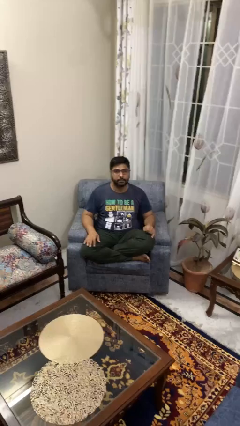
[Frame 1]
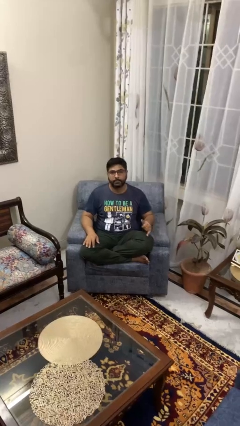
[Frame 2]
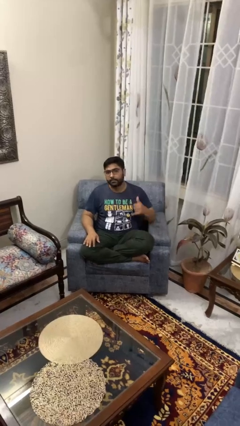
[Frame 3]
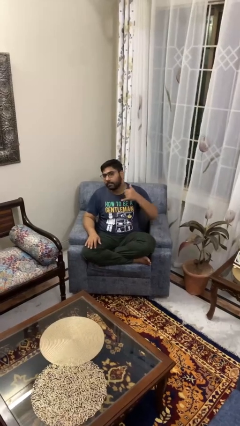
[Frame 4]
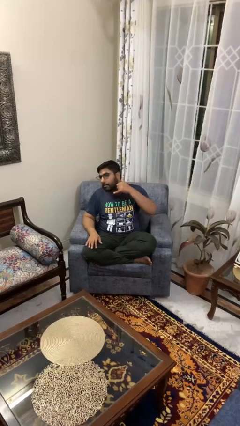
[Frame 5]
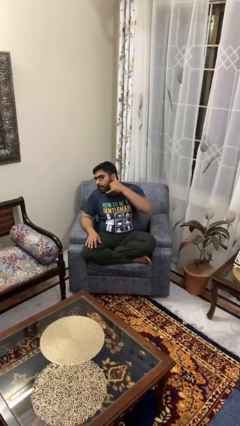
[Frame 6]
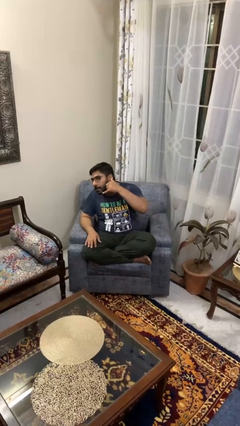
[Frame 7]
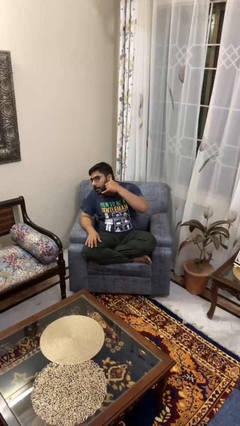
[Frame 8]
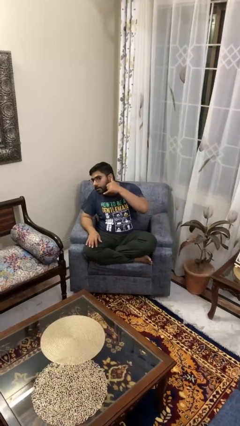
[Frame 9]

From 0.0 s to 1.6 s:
person gestures call me

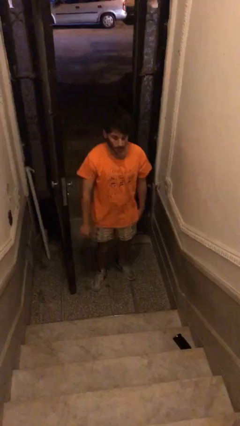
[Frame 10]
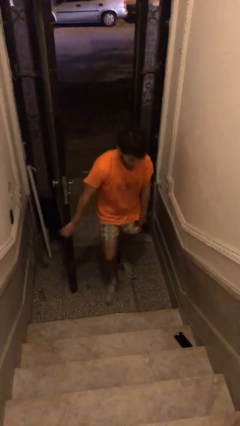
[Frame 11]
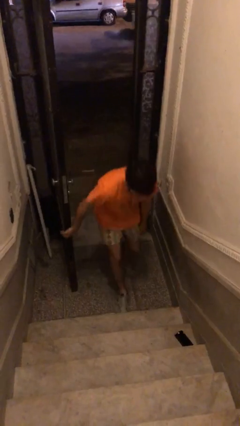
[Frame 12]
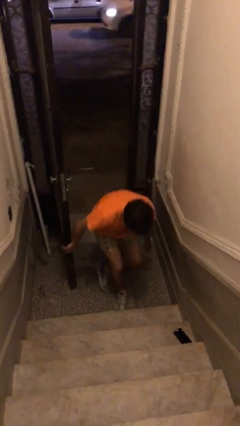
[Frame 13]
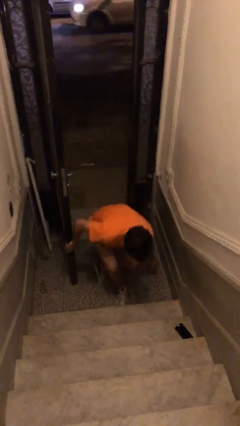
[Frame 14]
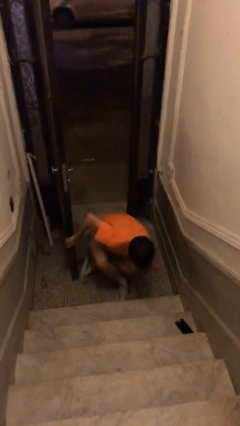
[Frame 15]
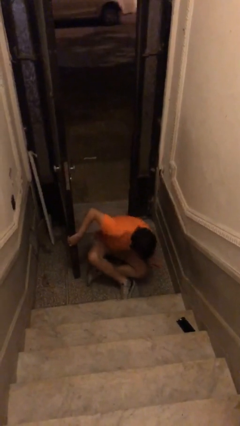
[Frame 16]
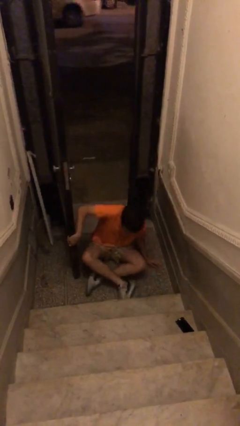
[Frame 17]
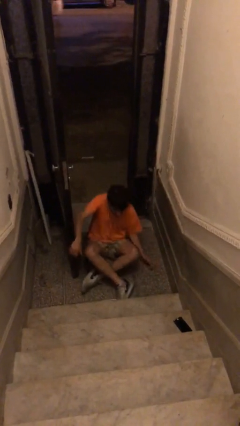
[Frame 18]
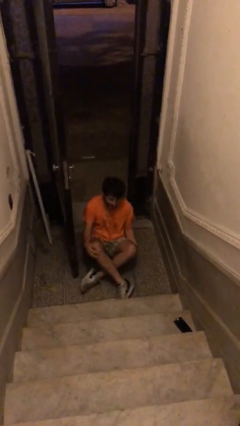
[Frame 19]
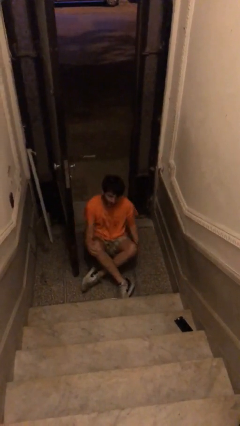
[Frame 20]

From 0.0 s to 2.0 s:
person sits down

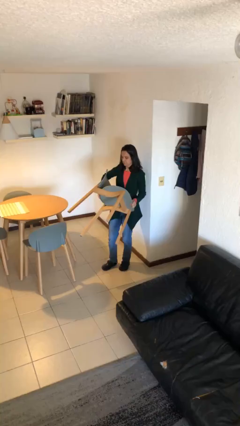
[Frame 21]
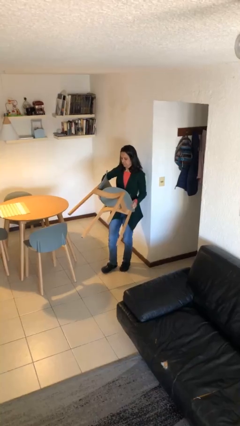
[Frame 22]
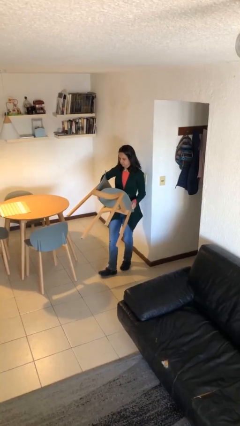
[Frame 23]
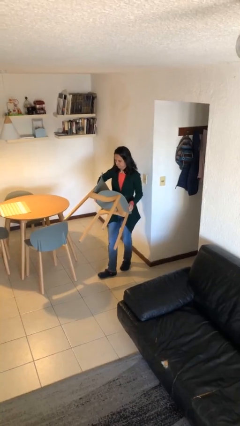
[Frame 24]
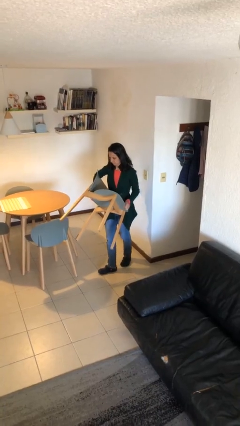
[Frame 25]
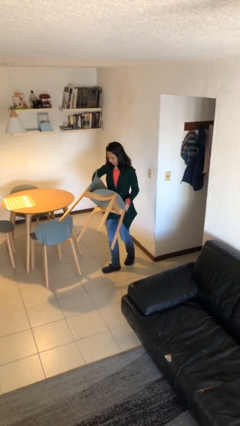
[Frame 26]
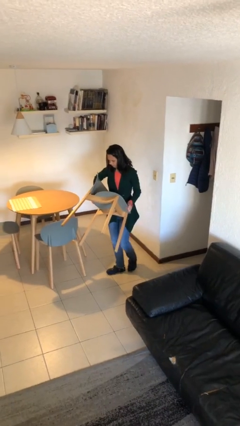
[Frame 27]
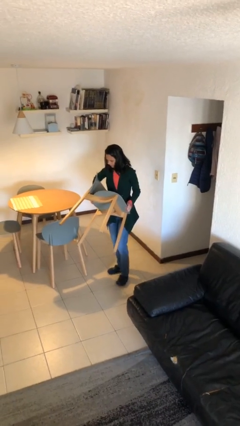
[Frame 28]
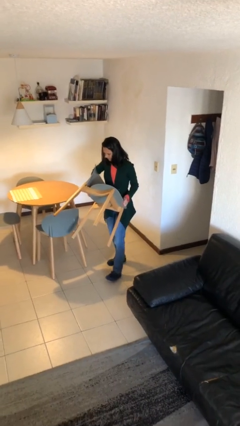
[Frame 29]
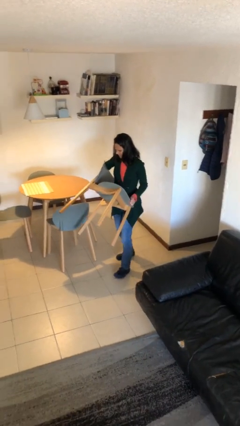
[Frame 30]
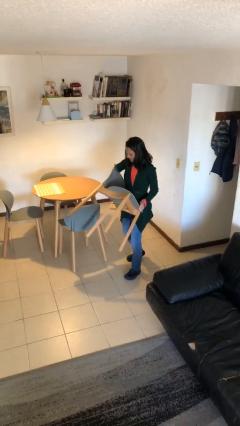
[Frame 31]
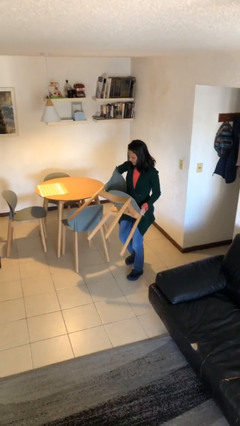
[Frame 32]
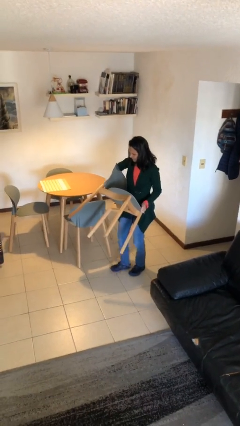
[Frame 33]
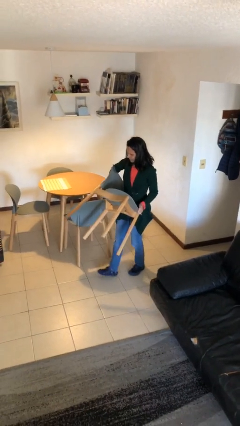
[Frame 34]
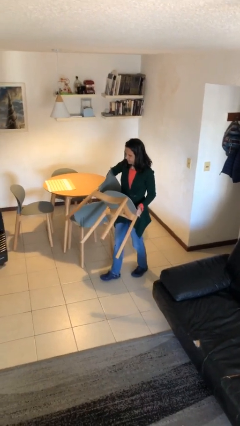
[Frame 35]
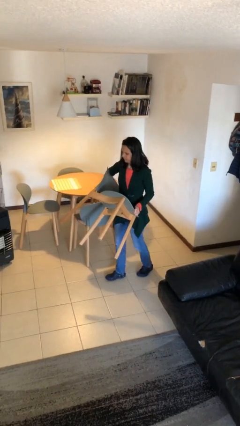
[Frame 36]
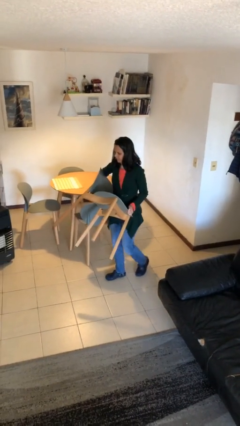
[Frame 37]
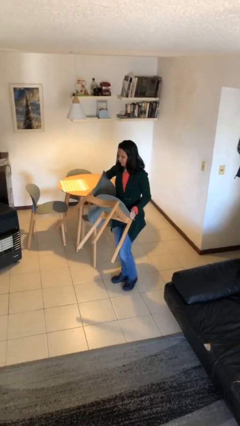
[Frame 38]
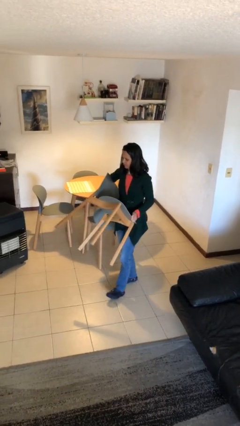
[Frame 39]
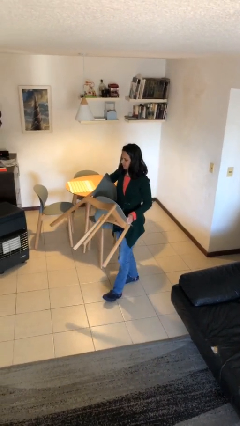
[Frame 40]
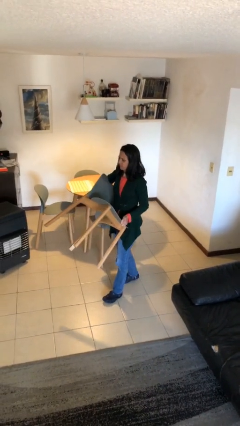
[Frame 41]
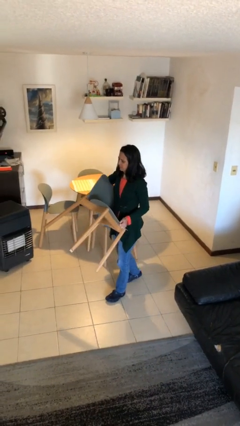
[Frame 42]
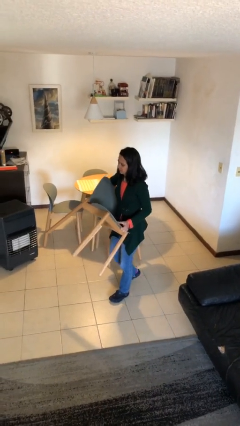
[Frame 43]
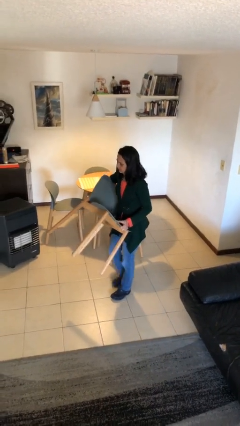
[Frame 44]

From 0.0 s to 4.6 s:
person carries heavy object

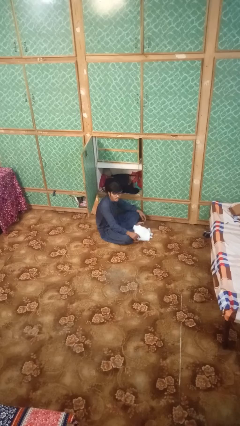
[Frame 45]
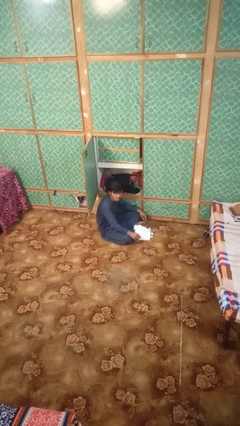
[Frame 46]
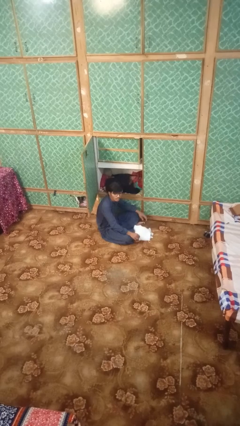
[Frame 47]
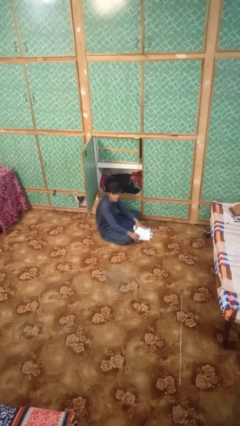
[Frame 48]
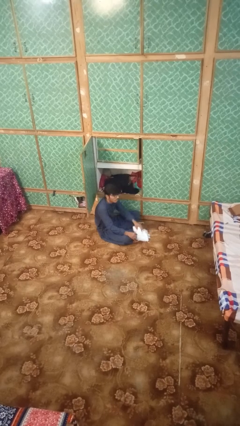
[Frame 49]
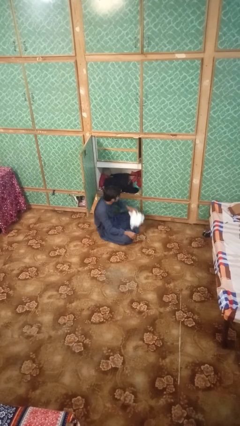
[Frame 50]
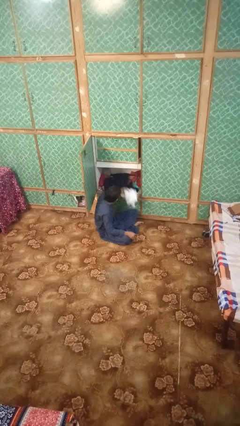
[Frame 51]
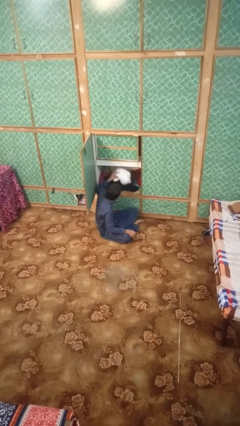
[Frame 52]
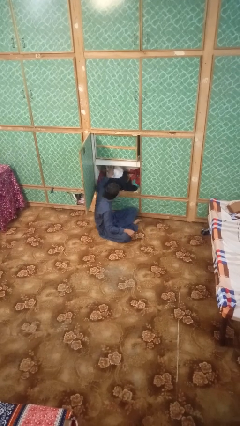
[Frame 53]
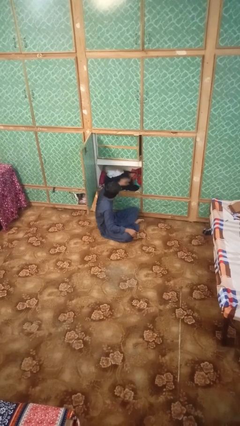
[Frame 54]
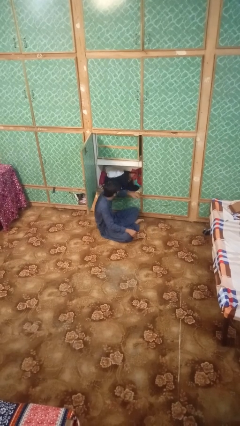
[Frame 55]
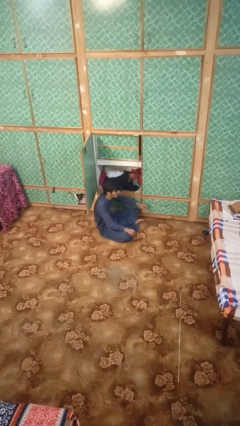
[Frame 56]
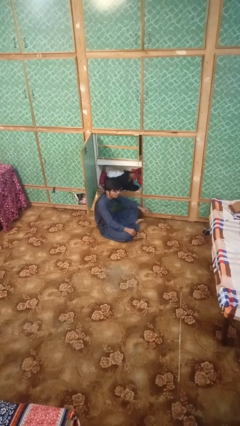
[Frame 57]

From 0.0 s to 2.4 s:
person puts clothes into dresser

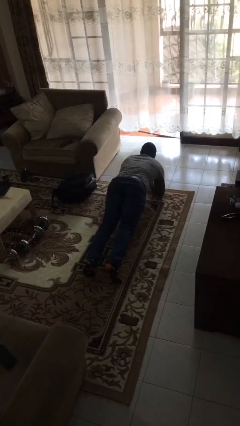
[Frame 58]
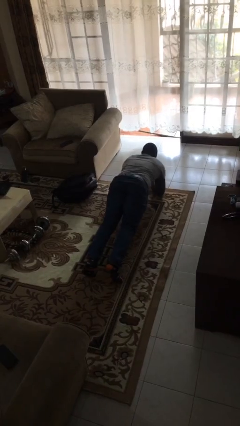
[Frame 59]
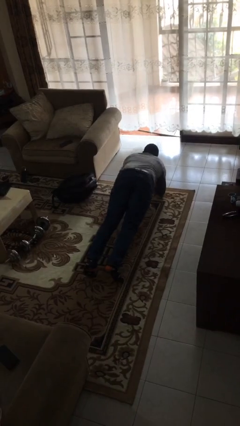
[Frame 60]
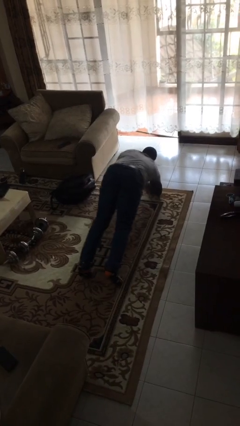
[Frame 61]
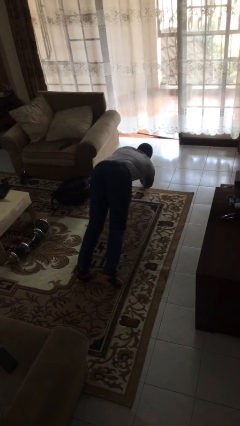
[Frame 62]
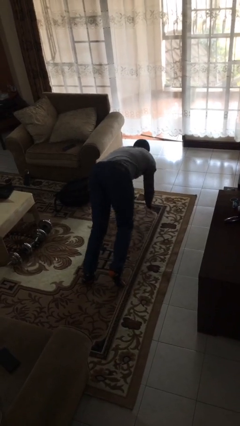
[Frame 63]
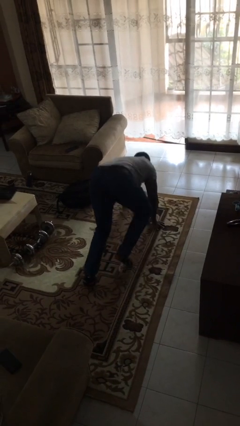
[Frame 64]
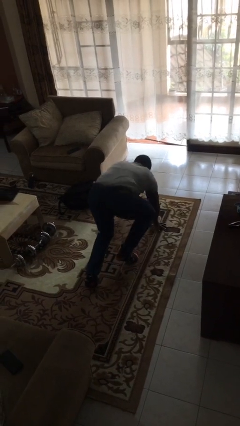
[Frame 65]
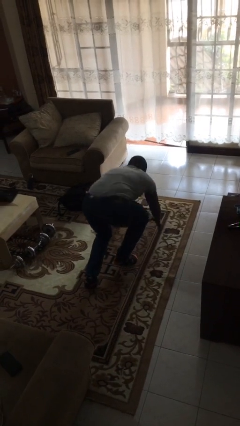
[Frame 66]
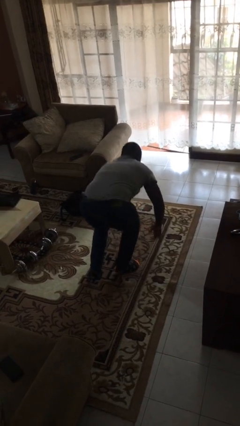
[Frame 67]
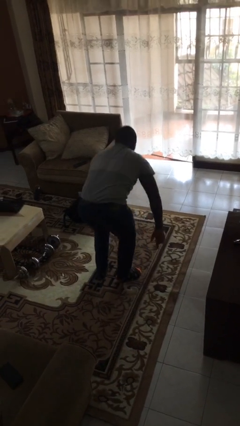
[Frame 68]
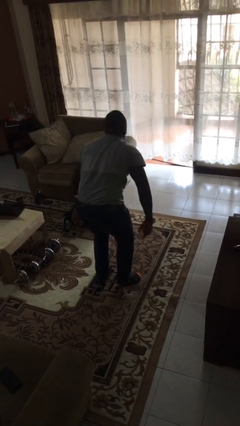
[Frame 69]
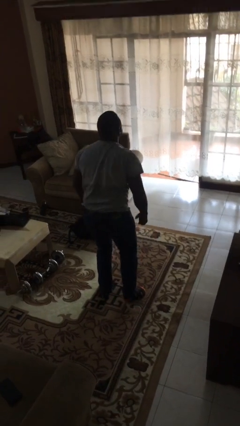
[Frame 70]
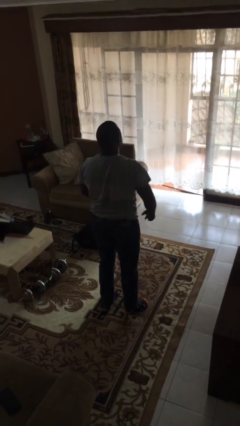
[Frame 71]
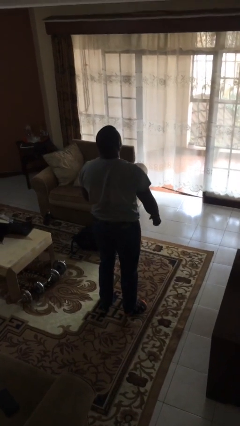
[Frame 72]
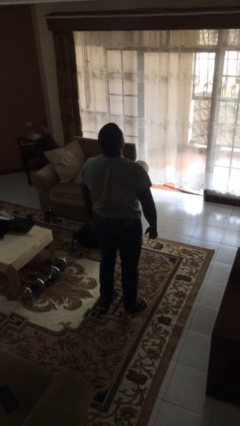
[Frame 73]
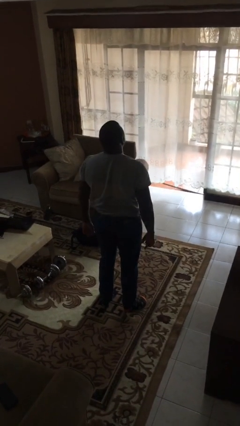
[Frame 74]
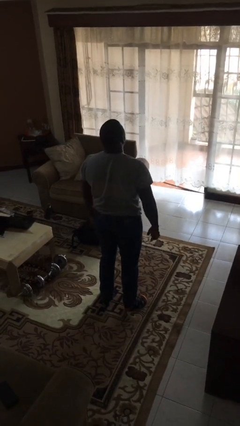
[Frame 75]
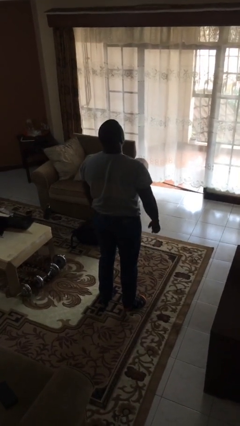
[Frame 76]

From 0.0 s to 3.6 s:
person stands up from floor

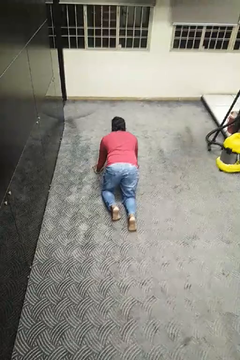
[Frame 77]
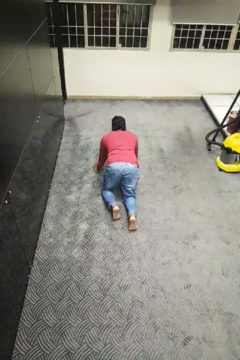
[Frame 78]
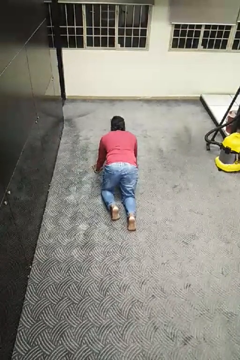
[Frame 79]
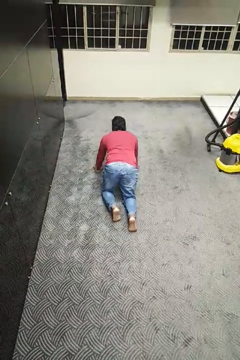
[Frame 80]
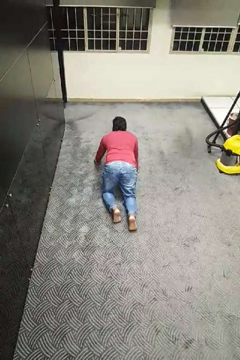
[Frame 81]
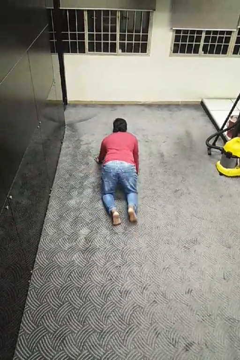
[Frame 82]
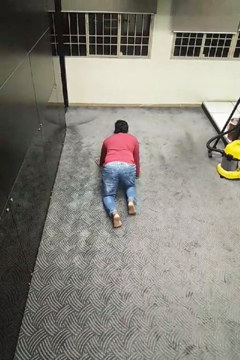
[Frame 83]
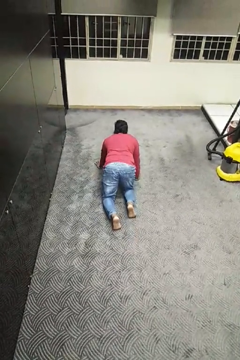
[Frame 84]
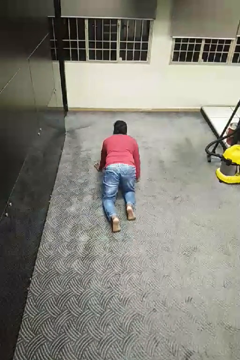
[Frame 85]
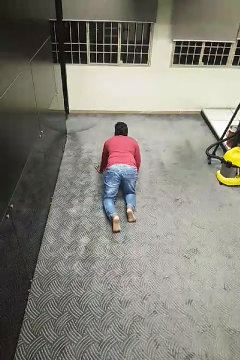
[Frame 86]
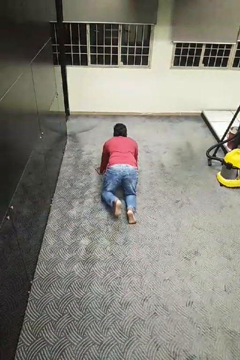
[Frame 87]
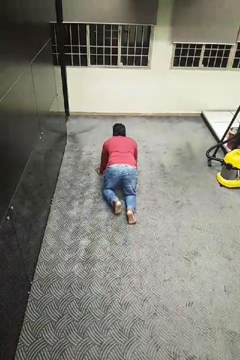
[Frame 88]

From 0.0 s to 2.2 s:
person crawls

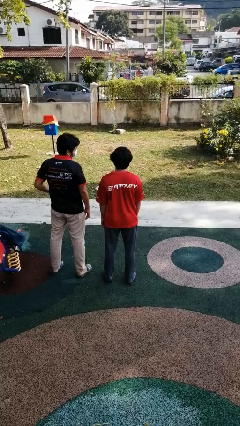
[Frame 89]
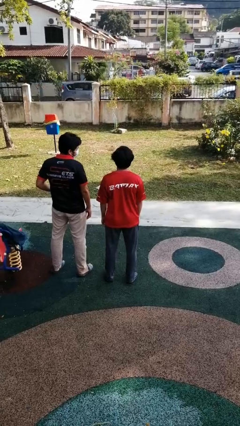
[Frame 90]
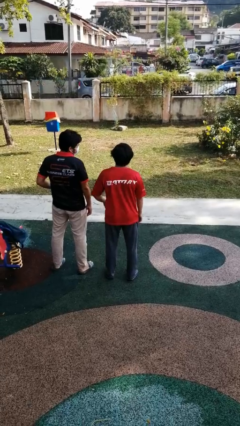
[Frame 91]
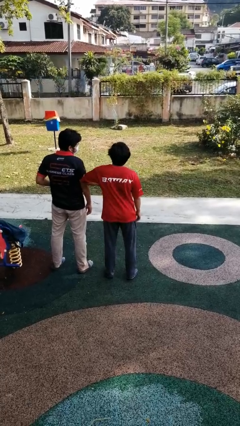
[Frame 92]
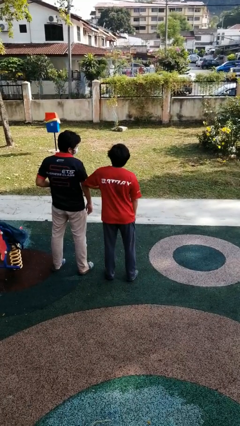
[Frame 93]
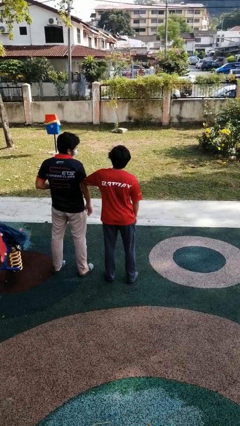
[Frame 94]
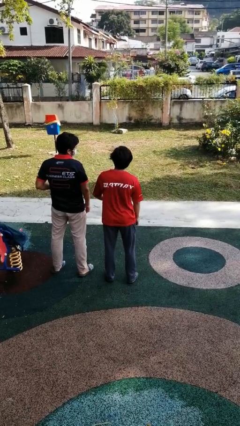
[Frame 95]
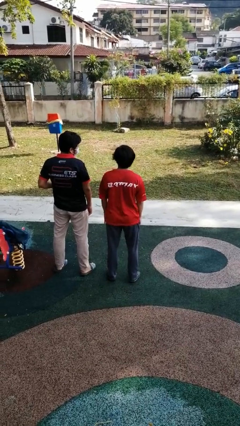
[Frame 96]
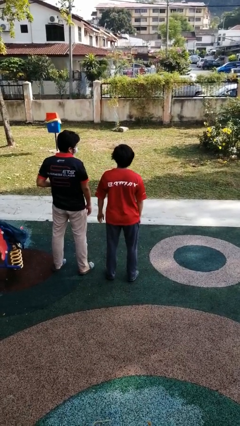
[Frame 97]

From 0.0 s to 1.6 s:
person nudges person with elbow
